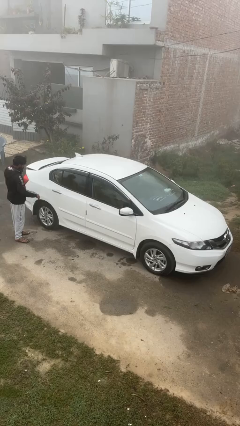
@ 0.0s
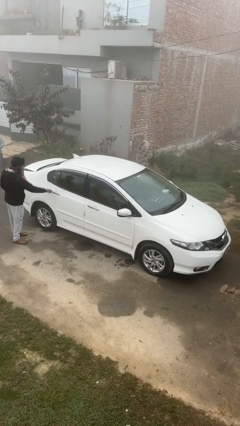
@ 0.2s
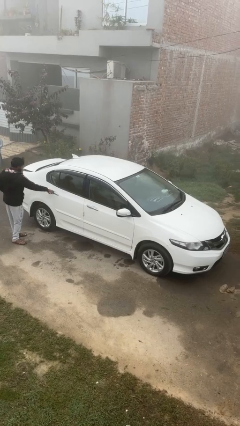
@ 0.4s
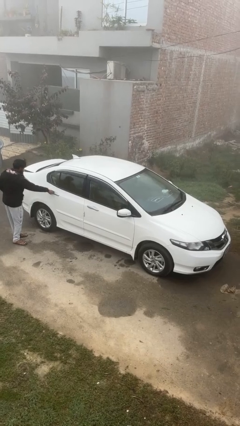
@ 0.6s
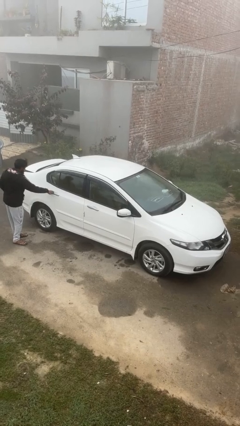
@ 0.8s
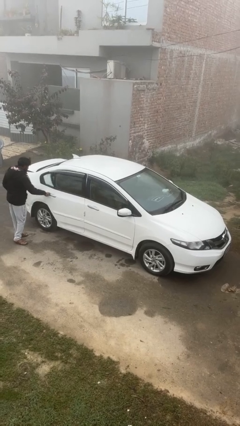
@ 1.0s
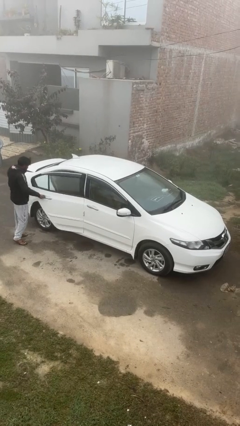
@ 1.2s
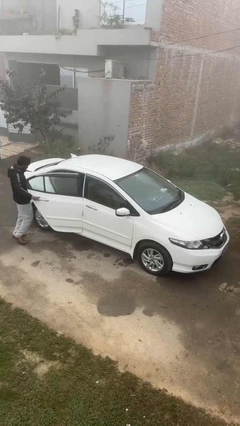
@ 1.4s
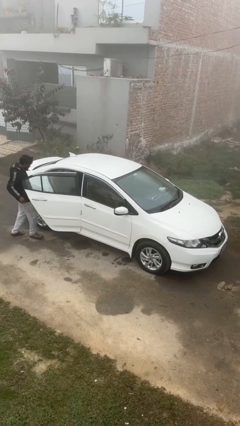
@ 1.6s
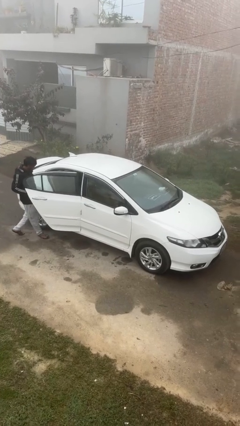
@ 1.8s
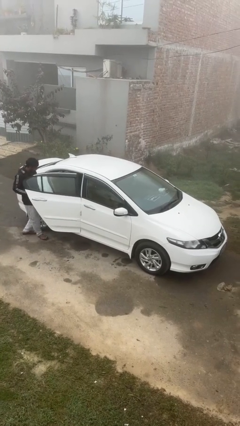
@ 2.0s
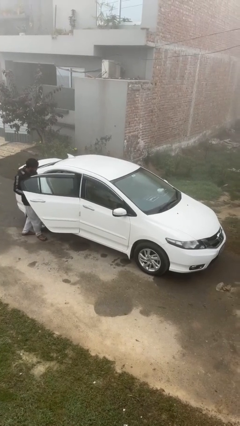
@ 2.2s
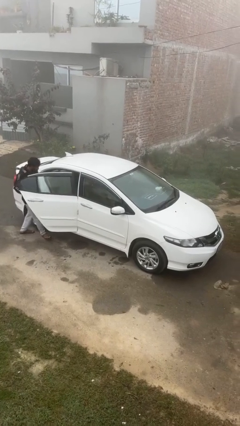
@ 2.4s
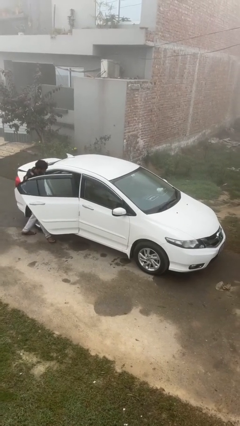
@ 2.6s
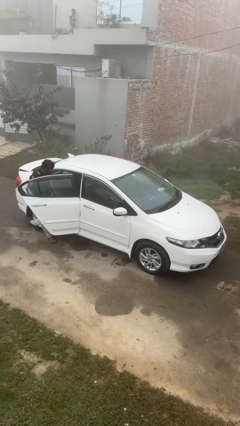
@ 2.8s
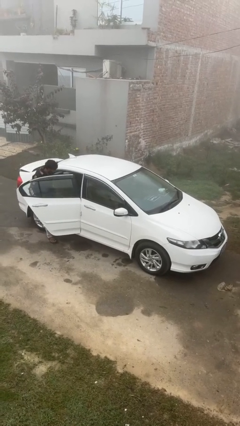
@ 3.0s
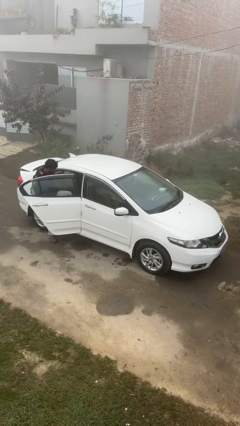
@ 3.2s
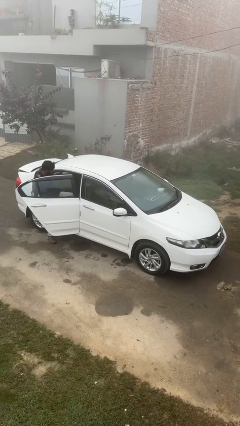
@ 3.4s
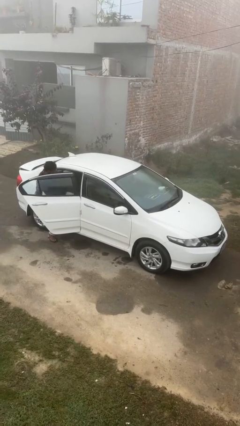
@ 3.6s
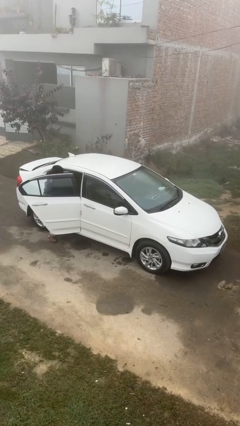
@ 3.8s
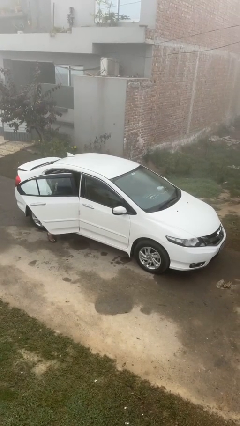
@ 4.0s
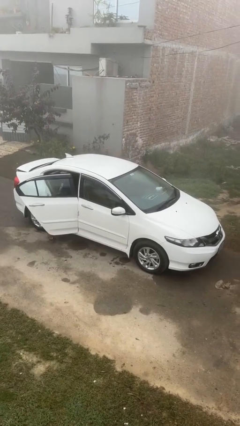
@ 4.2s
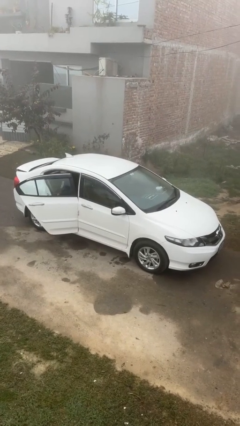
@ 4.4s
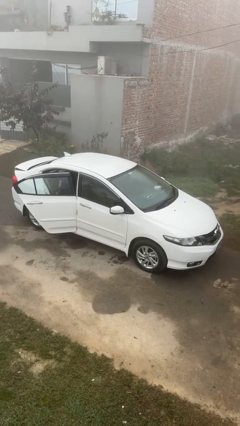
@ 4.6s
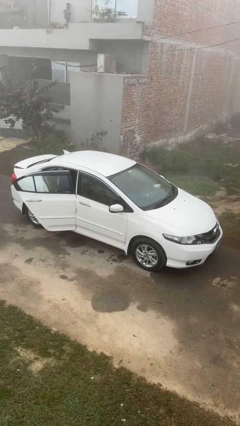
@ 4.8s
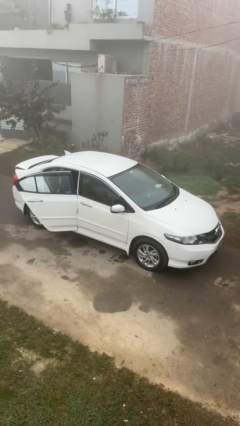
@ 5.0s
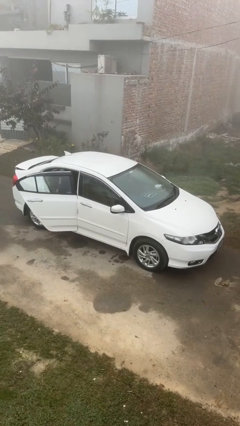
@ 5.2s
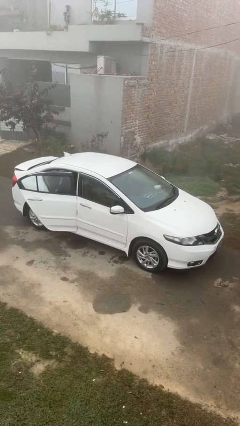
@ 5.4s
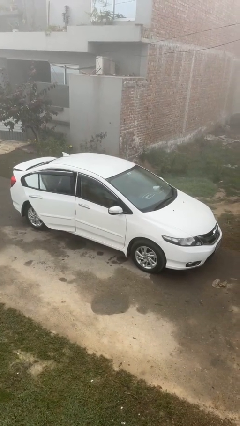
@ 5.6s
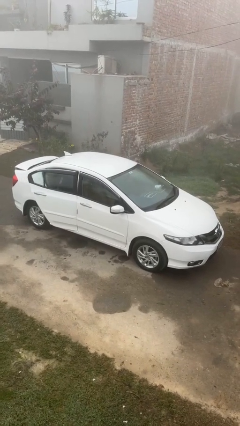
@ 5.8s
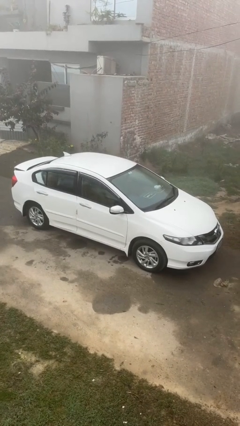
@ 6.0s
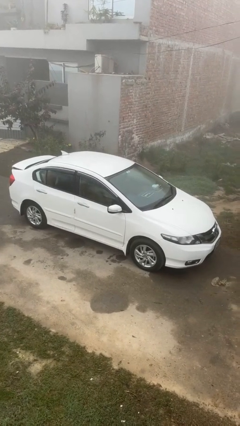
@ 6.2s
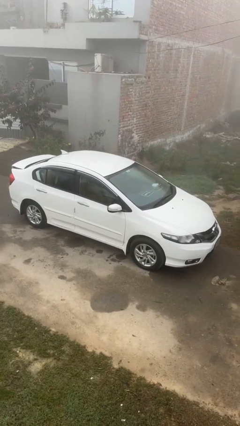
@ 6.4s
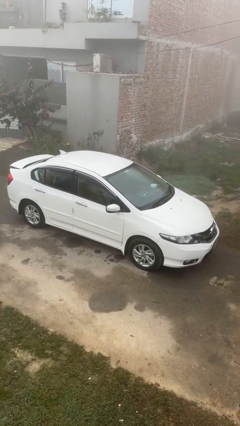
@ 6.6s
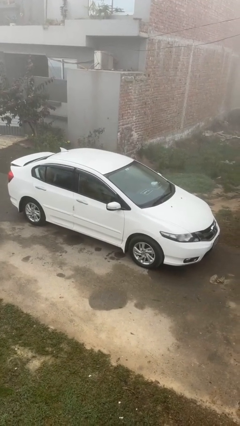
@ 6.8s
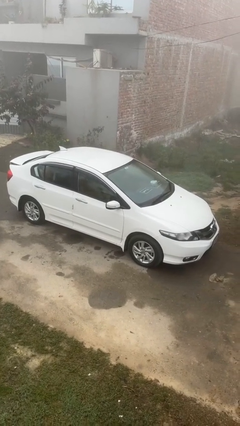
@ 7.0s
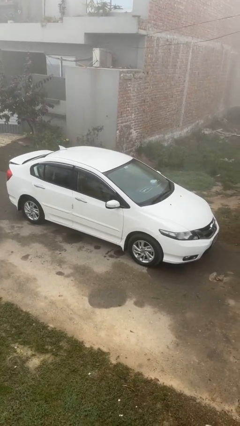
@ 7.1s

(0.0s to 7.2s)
car picks up person

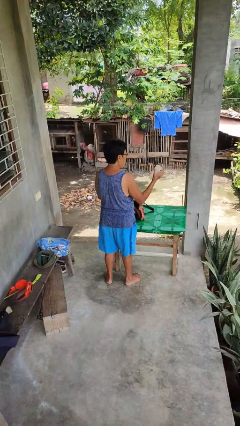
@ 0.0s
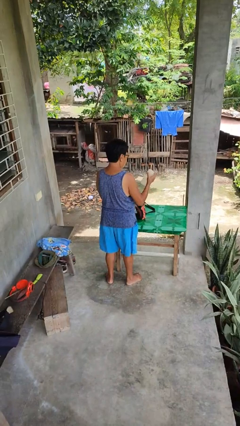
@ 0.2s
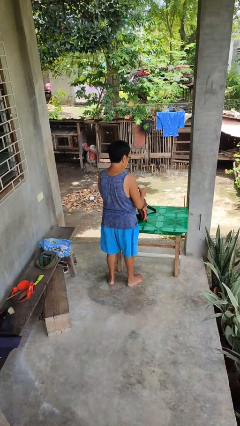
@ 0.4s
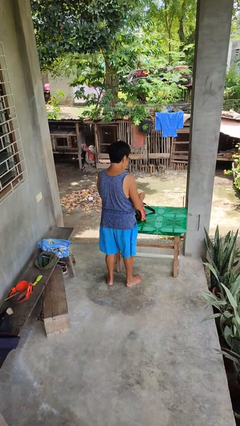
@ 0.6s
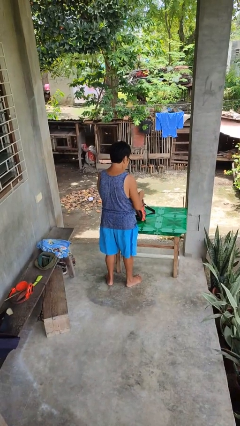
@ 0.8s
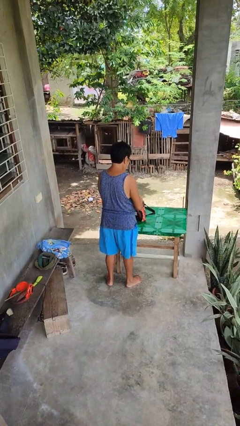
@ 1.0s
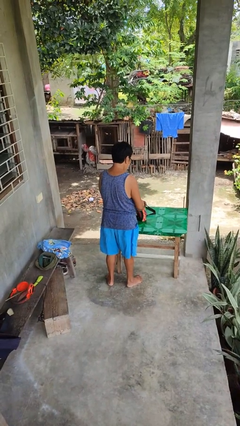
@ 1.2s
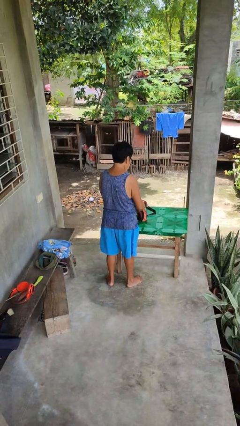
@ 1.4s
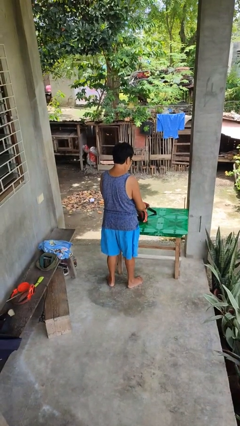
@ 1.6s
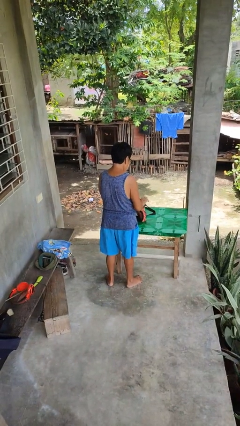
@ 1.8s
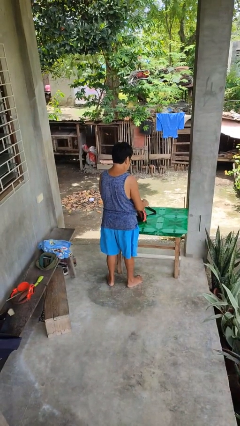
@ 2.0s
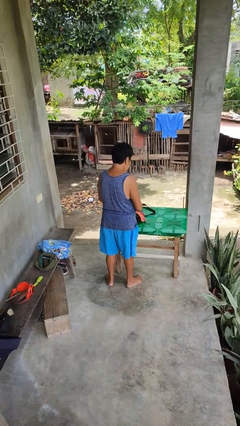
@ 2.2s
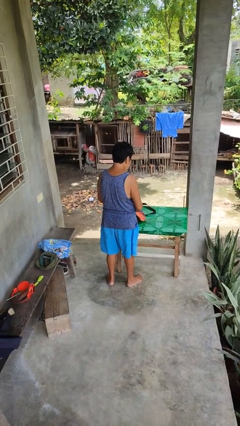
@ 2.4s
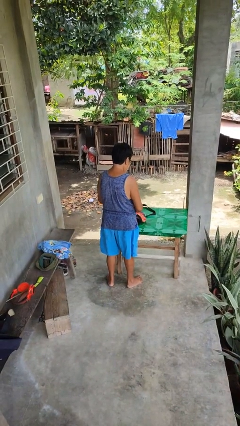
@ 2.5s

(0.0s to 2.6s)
person puts object into purse

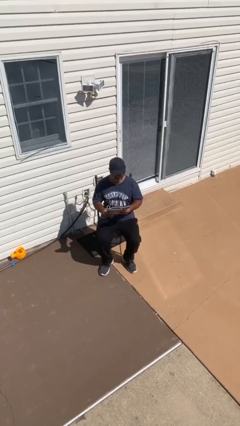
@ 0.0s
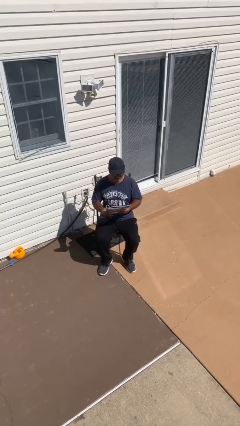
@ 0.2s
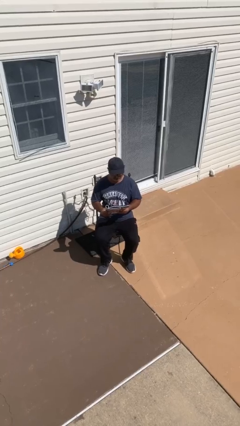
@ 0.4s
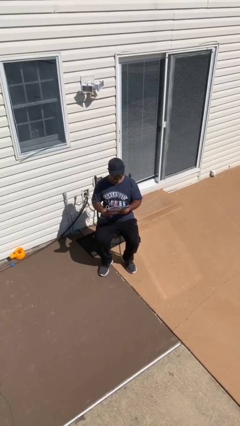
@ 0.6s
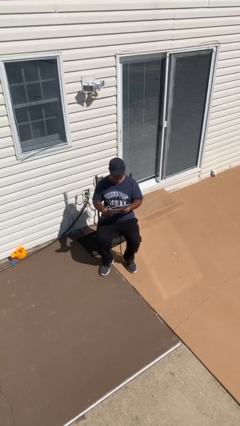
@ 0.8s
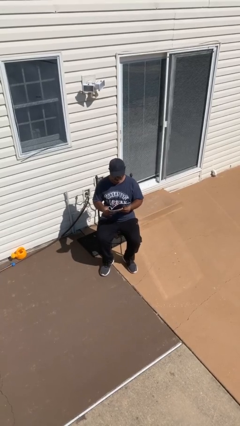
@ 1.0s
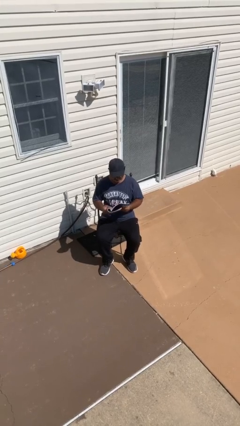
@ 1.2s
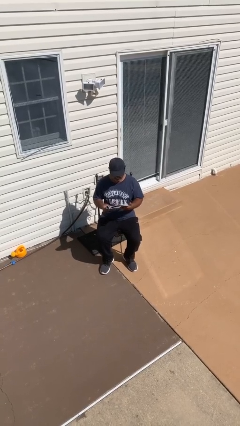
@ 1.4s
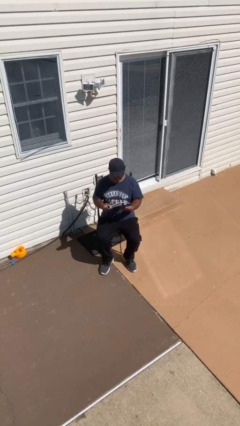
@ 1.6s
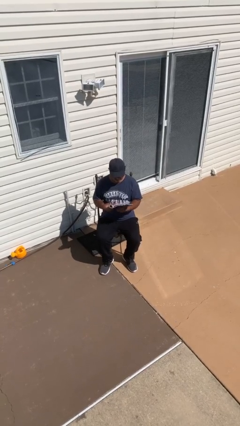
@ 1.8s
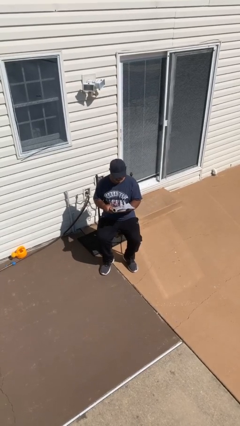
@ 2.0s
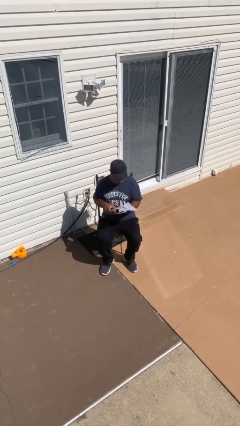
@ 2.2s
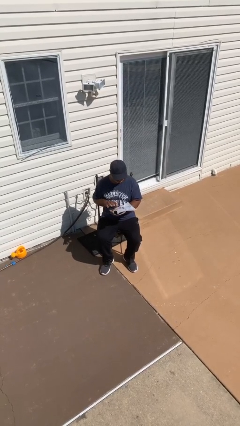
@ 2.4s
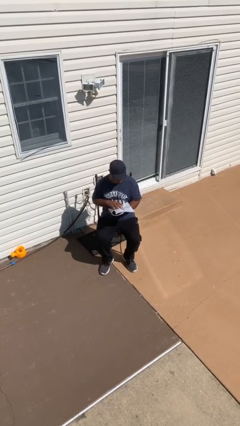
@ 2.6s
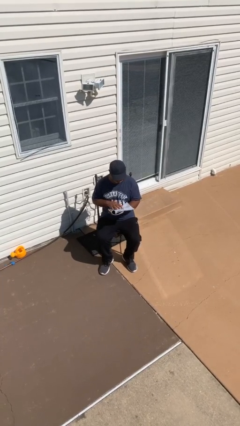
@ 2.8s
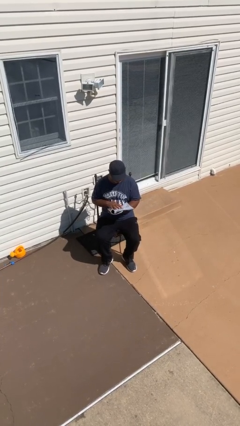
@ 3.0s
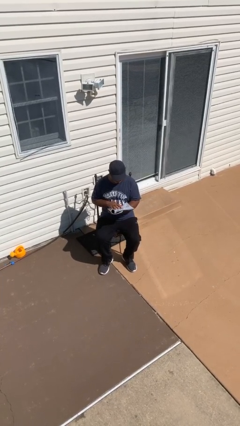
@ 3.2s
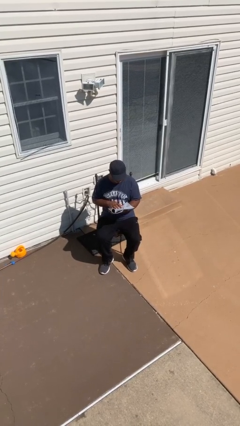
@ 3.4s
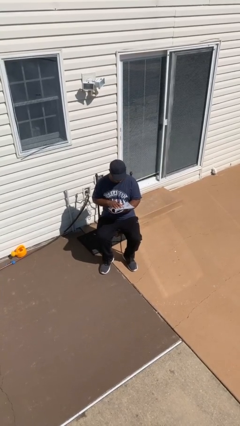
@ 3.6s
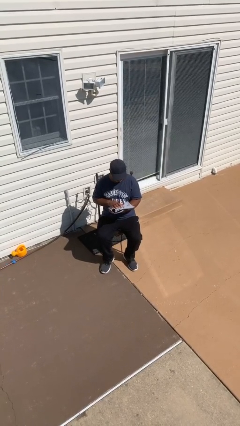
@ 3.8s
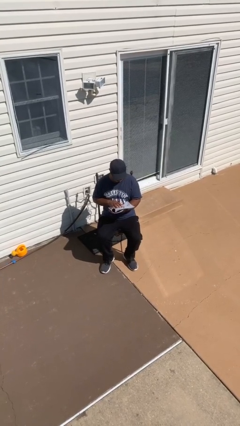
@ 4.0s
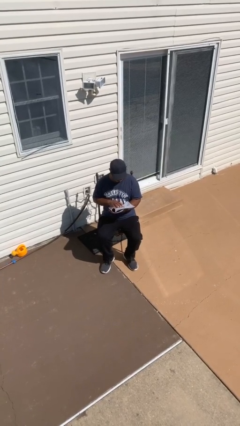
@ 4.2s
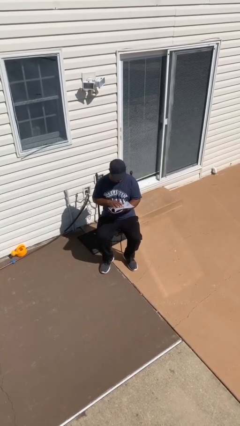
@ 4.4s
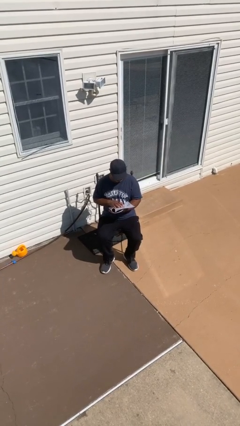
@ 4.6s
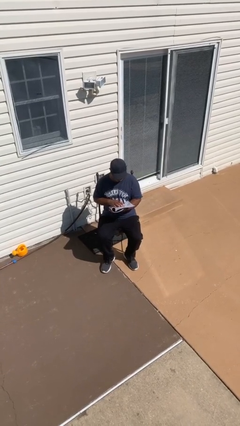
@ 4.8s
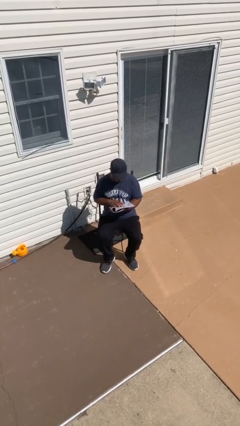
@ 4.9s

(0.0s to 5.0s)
person reads document

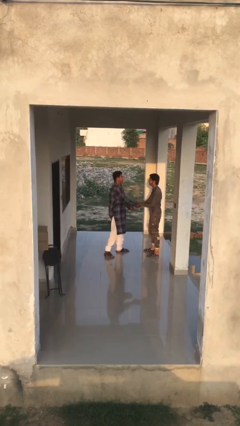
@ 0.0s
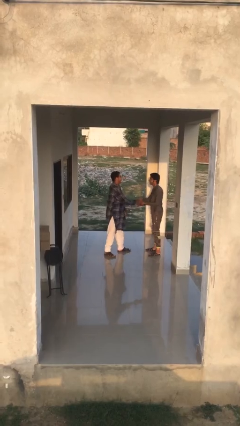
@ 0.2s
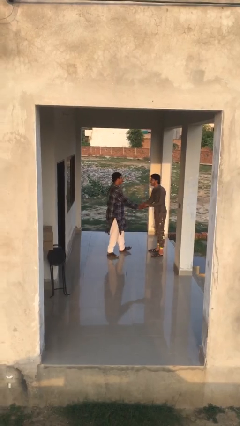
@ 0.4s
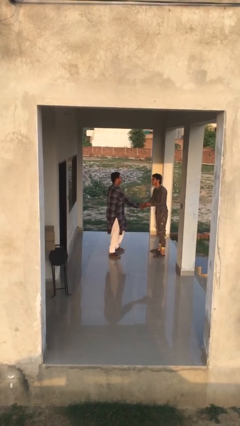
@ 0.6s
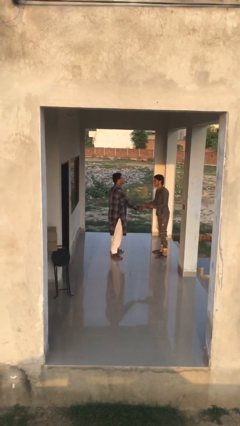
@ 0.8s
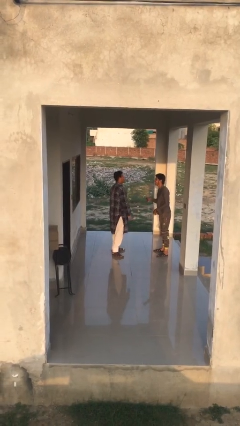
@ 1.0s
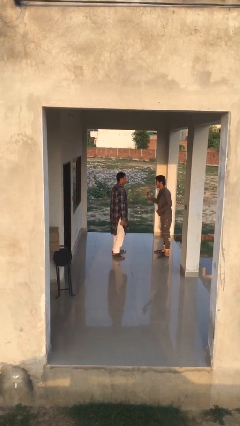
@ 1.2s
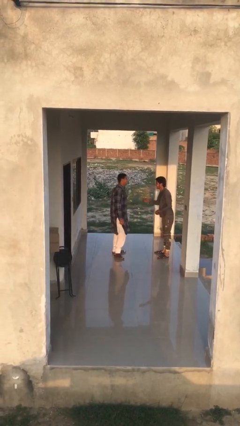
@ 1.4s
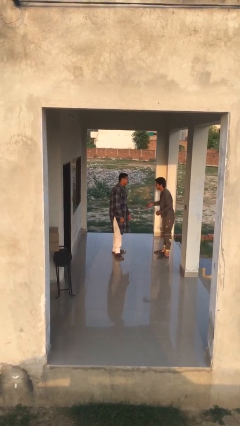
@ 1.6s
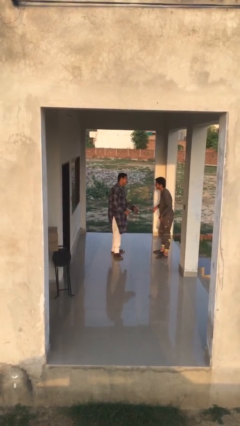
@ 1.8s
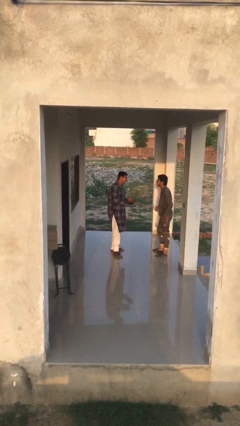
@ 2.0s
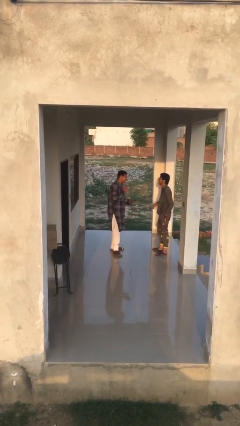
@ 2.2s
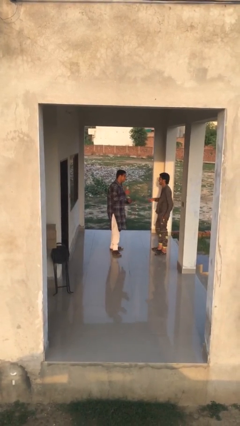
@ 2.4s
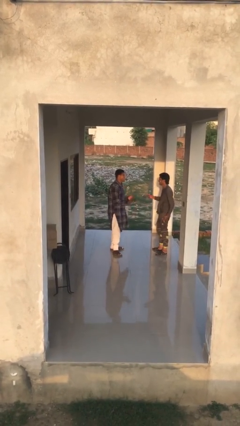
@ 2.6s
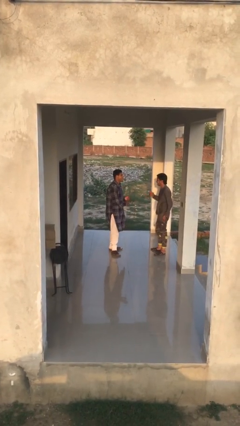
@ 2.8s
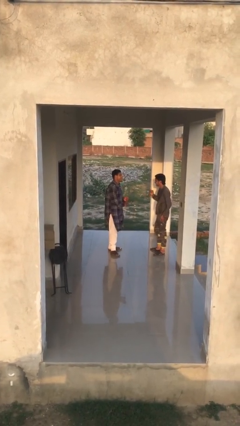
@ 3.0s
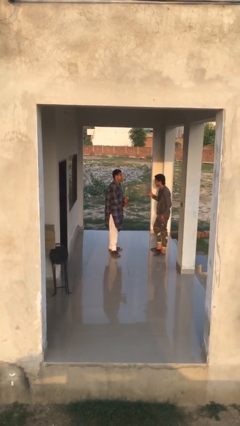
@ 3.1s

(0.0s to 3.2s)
person talks to person
